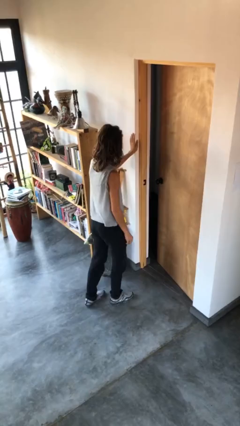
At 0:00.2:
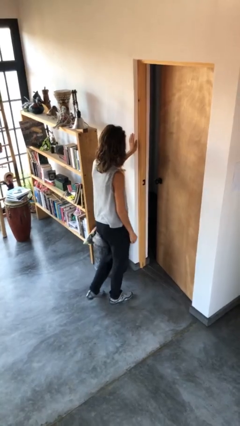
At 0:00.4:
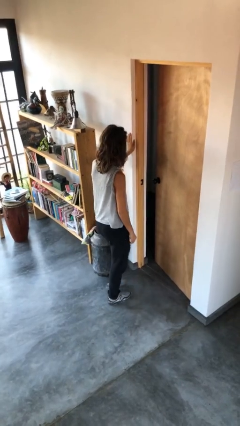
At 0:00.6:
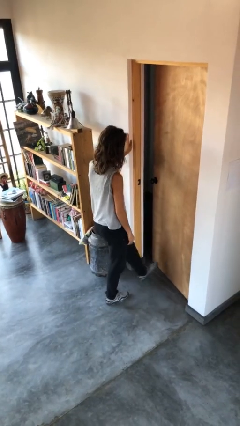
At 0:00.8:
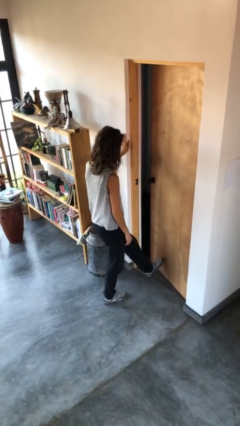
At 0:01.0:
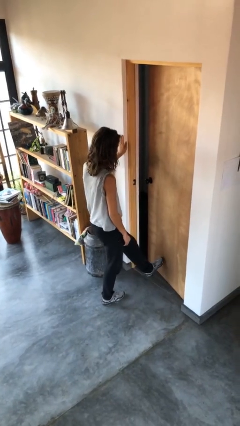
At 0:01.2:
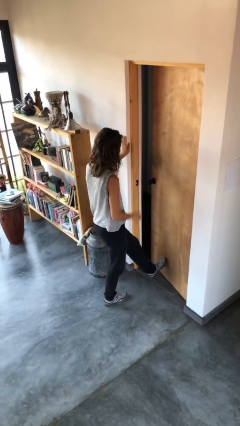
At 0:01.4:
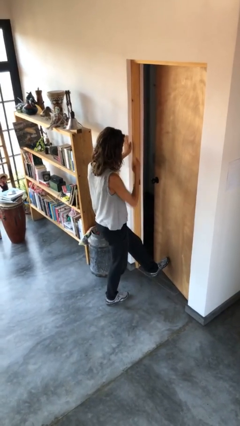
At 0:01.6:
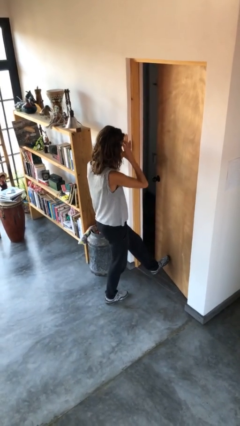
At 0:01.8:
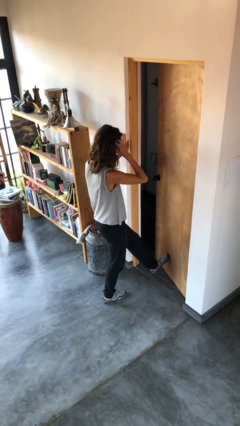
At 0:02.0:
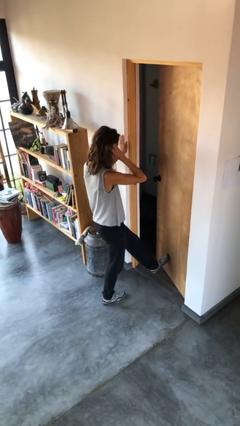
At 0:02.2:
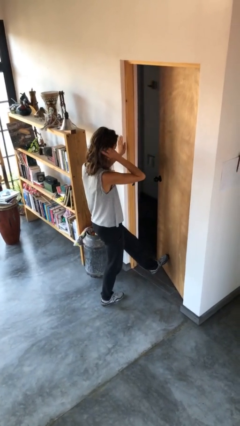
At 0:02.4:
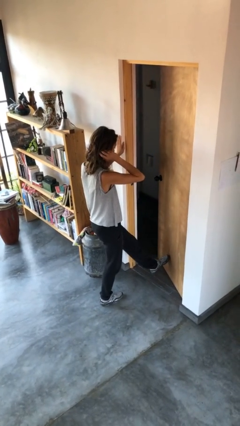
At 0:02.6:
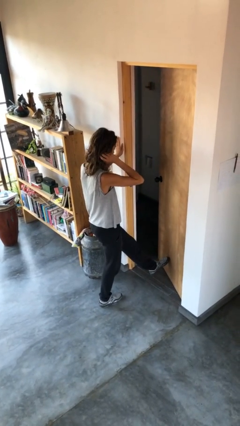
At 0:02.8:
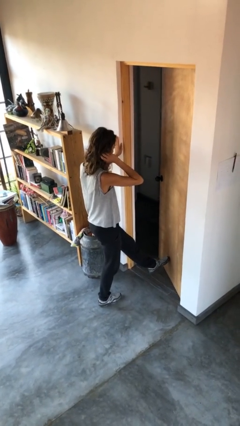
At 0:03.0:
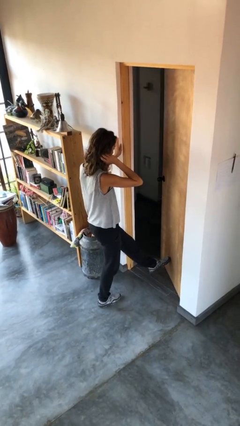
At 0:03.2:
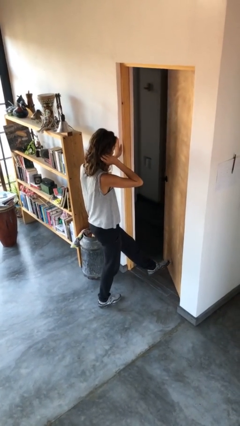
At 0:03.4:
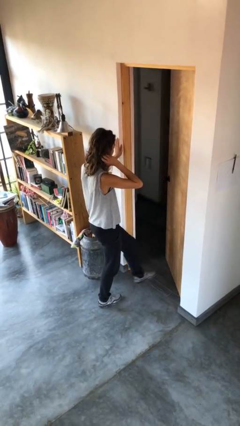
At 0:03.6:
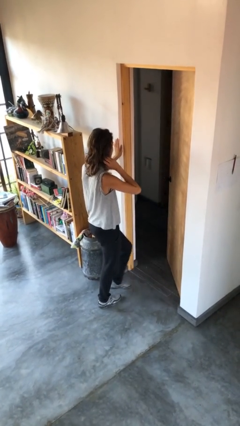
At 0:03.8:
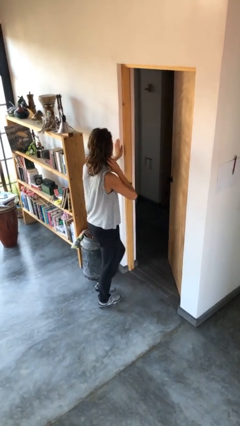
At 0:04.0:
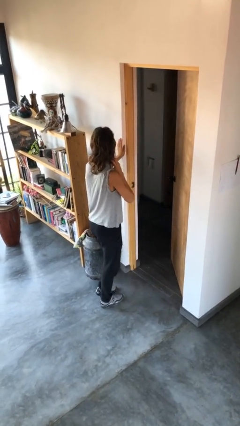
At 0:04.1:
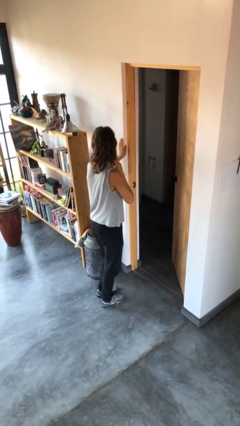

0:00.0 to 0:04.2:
person opens facility door

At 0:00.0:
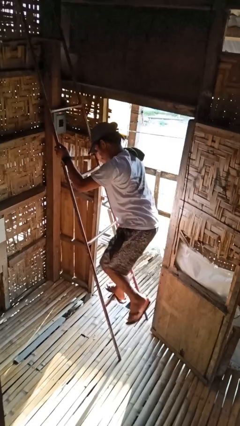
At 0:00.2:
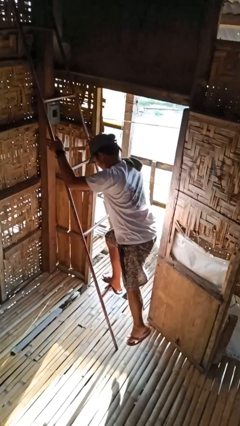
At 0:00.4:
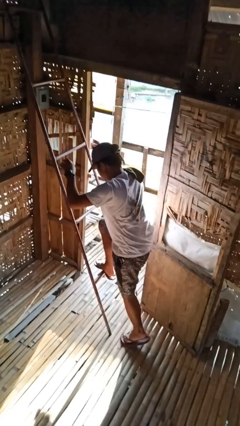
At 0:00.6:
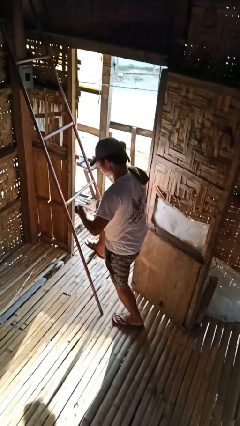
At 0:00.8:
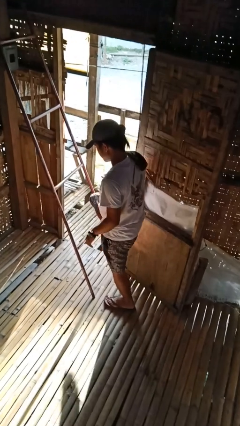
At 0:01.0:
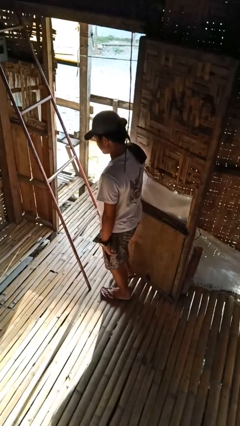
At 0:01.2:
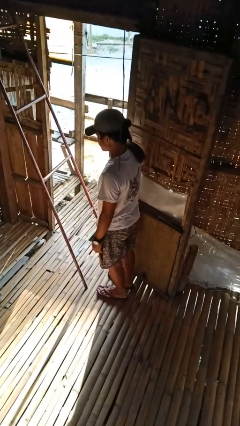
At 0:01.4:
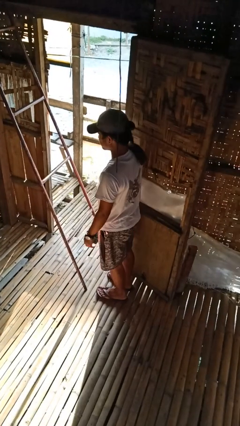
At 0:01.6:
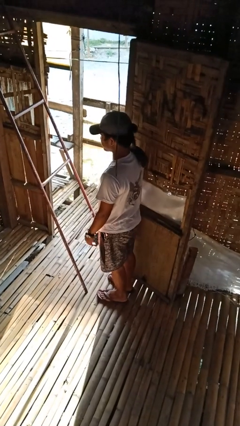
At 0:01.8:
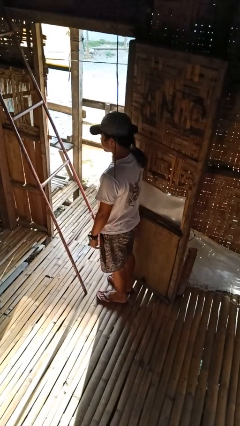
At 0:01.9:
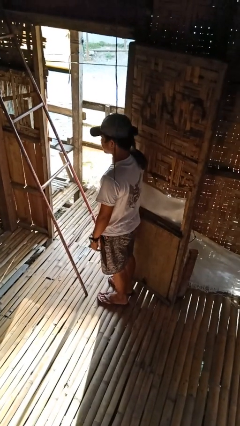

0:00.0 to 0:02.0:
person climbs down ladder

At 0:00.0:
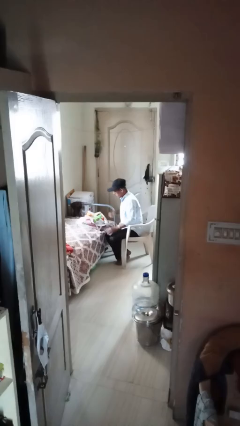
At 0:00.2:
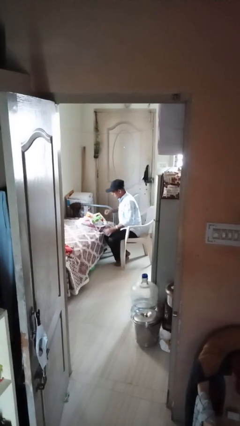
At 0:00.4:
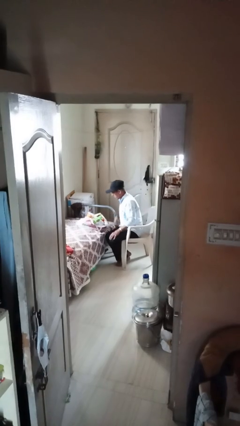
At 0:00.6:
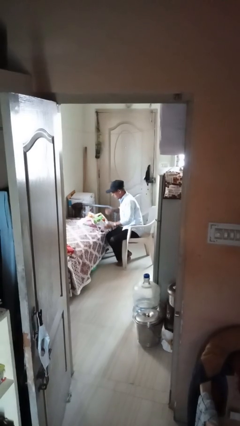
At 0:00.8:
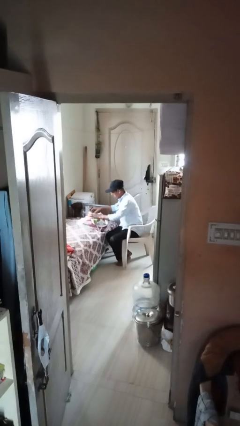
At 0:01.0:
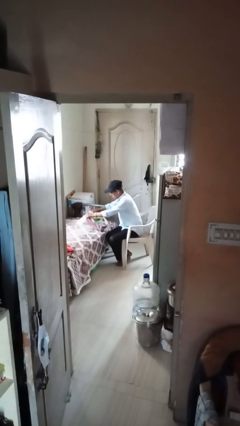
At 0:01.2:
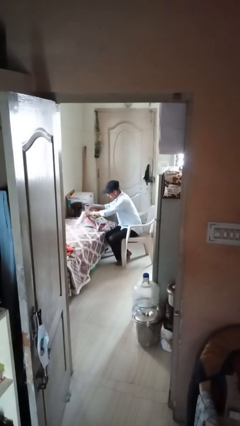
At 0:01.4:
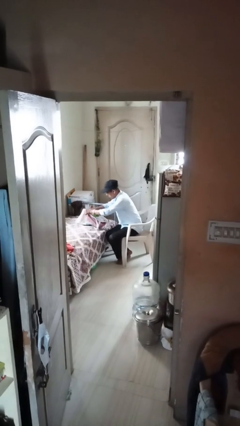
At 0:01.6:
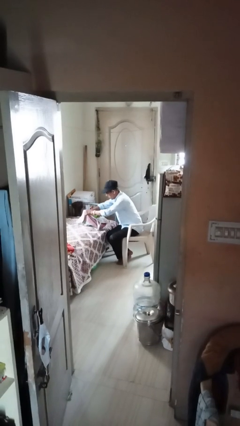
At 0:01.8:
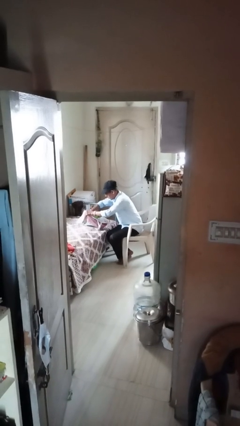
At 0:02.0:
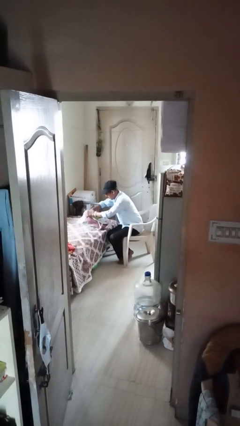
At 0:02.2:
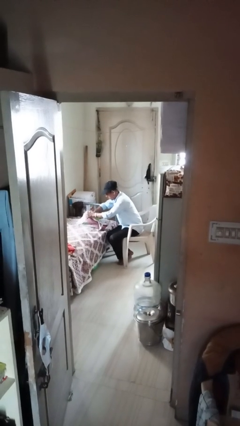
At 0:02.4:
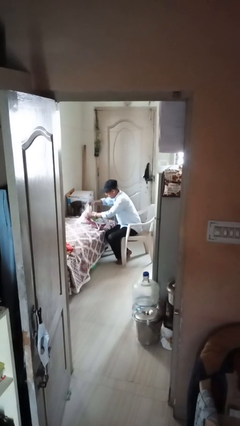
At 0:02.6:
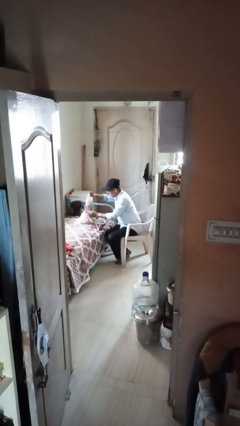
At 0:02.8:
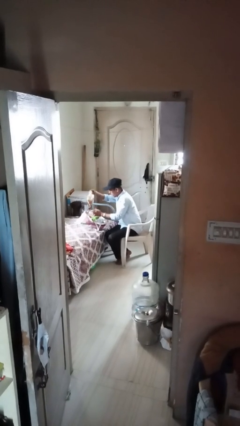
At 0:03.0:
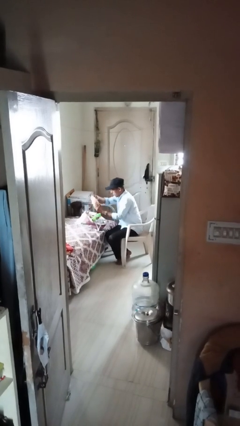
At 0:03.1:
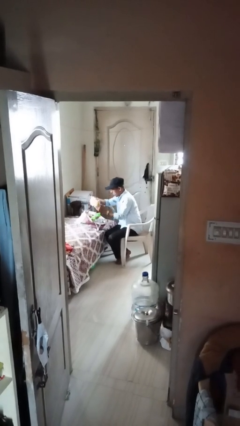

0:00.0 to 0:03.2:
person takes object from bag

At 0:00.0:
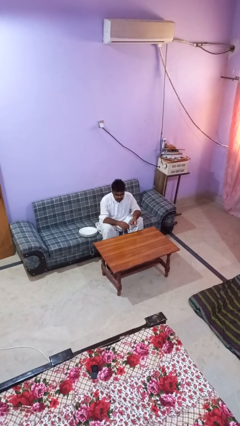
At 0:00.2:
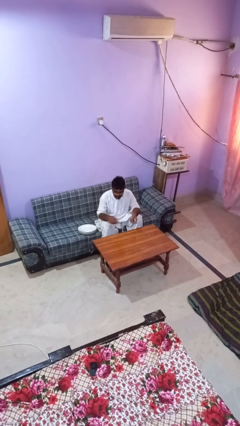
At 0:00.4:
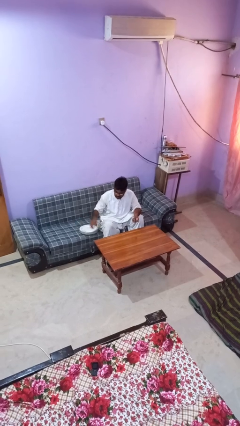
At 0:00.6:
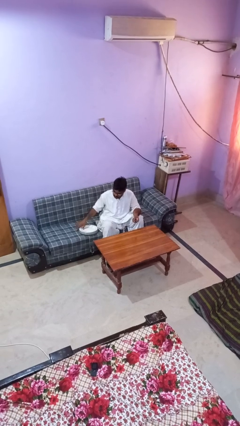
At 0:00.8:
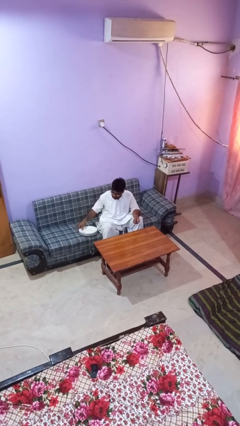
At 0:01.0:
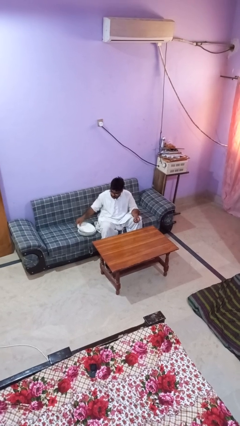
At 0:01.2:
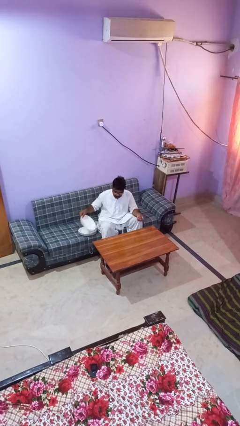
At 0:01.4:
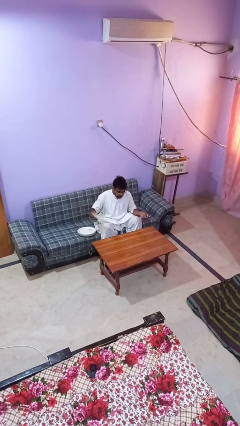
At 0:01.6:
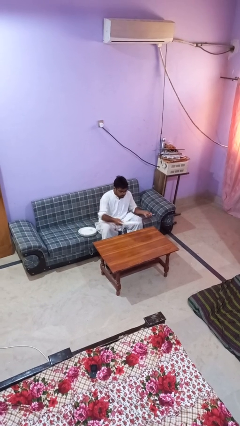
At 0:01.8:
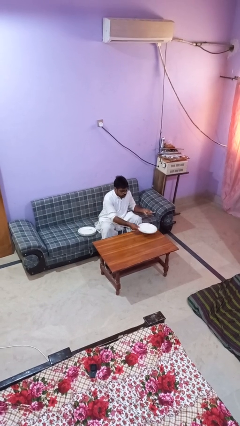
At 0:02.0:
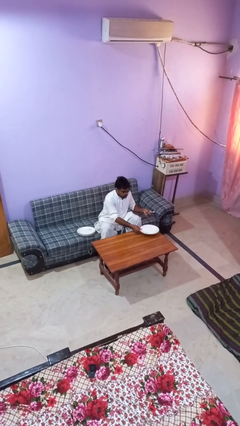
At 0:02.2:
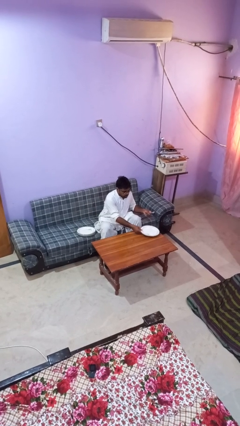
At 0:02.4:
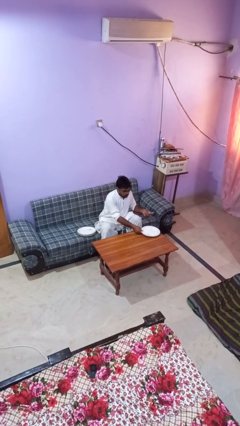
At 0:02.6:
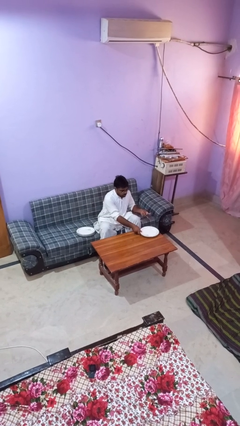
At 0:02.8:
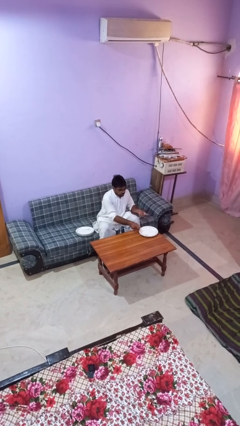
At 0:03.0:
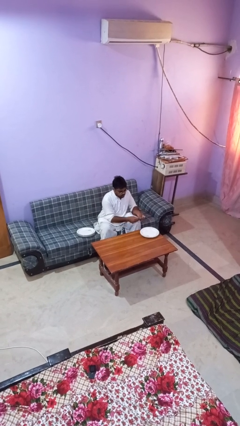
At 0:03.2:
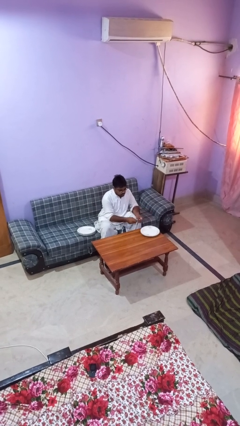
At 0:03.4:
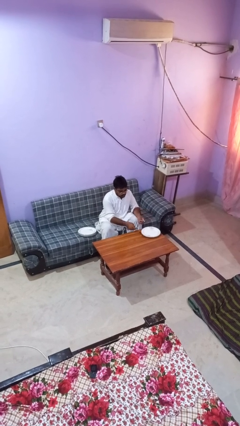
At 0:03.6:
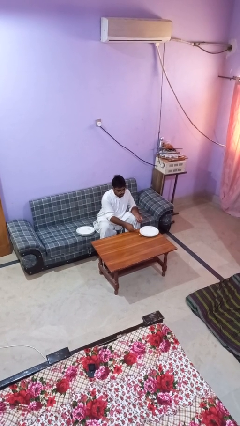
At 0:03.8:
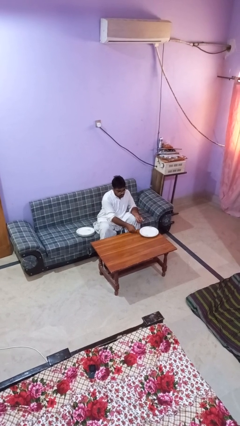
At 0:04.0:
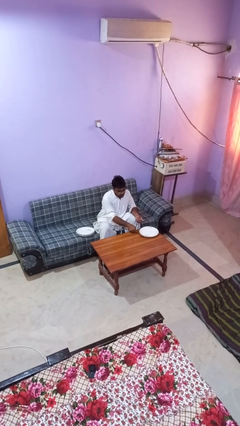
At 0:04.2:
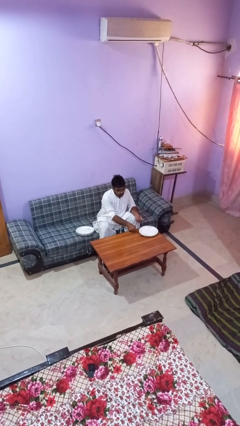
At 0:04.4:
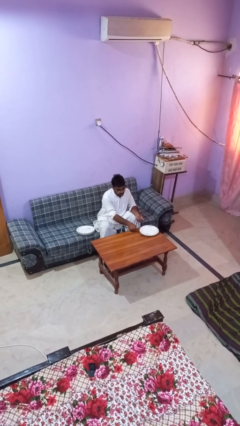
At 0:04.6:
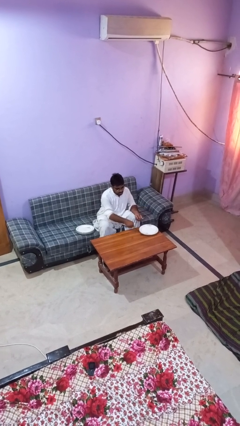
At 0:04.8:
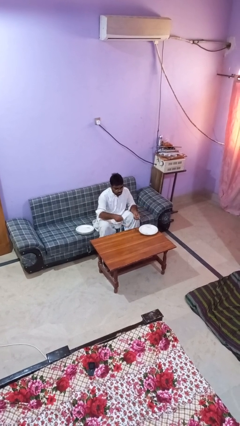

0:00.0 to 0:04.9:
person sets table

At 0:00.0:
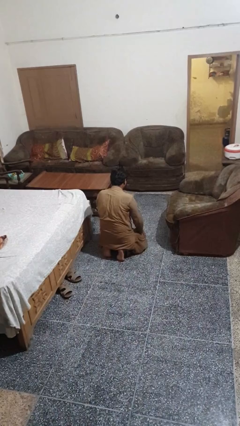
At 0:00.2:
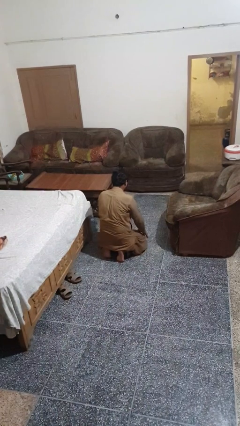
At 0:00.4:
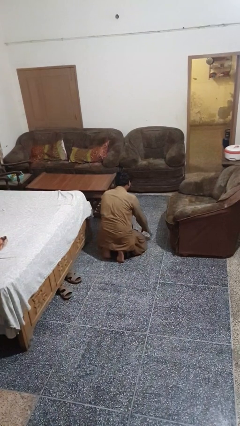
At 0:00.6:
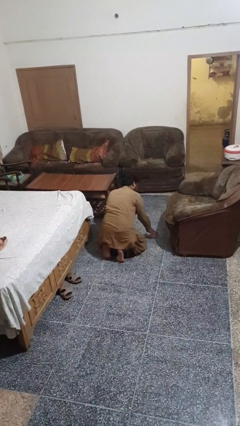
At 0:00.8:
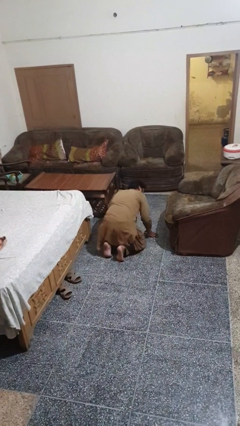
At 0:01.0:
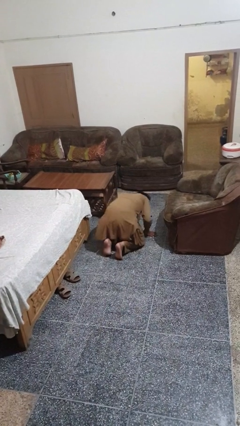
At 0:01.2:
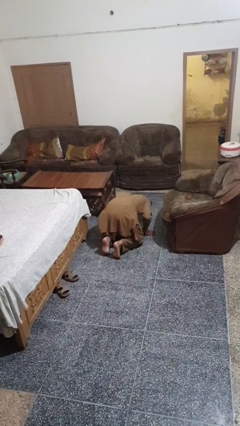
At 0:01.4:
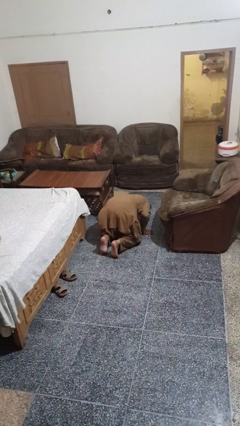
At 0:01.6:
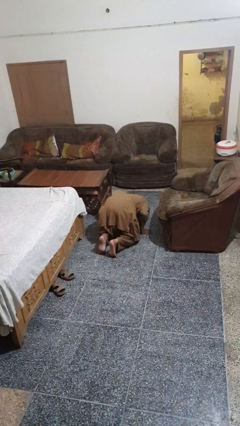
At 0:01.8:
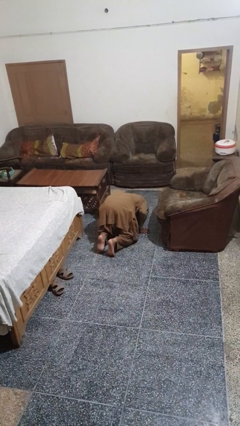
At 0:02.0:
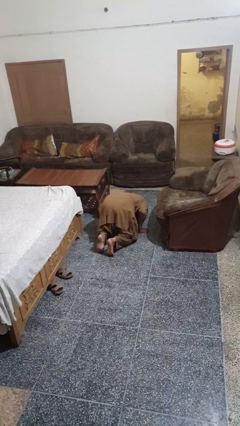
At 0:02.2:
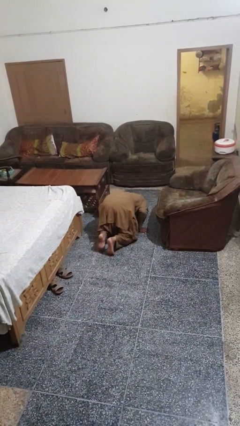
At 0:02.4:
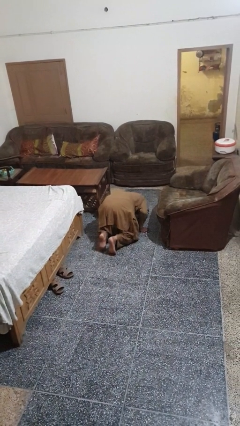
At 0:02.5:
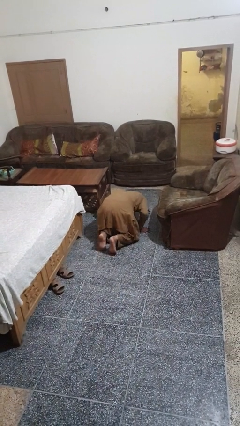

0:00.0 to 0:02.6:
person searches under couch

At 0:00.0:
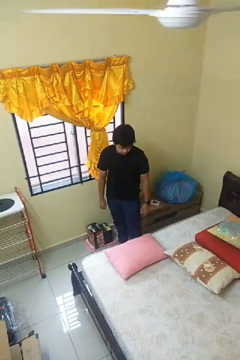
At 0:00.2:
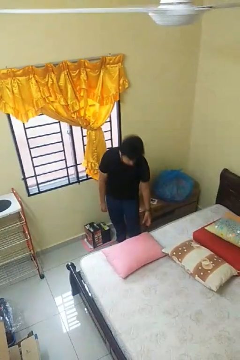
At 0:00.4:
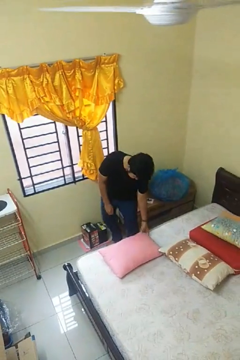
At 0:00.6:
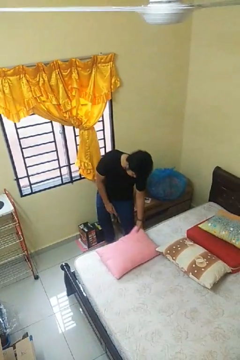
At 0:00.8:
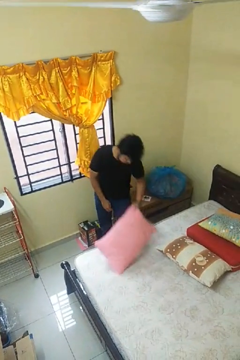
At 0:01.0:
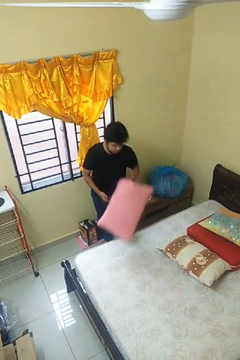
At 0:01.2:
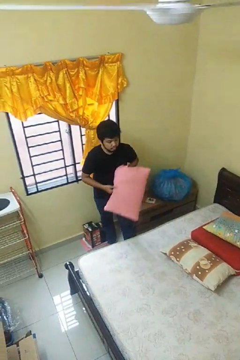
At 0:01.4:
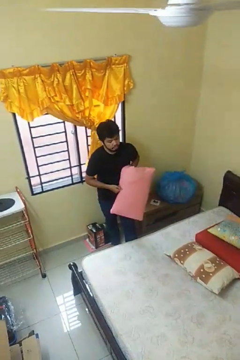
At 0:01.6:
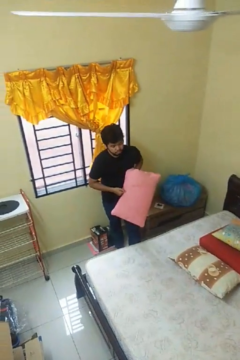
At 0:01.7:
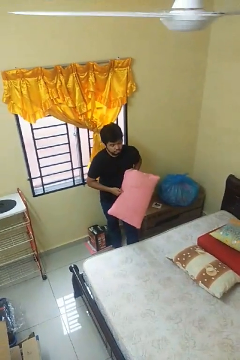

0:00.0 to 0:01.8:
person picks up object from bed
